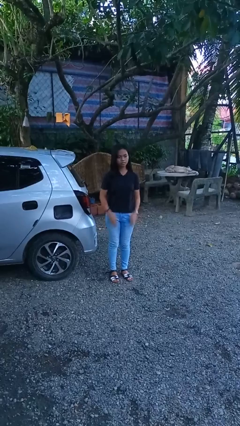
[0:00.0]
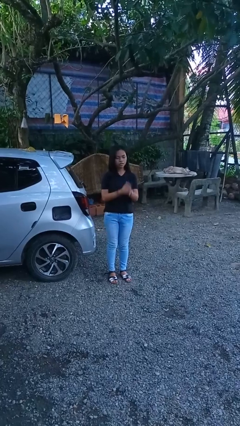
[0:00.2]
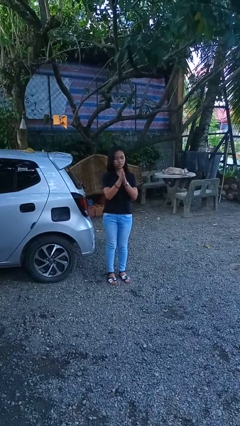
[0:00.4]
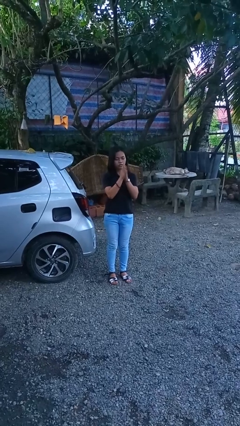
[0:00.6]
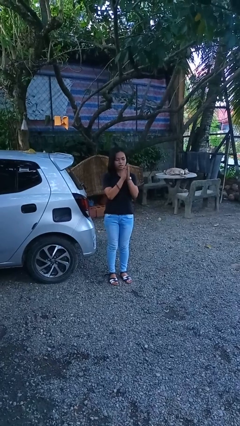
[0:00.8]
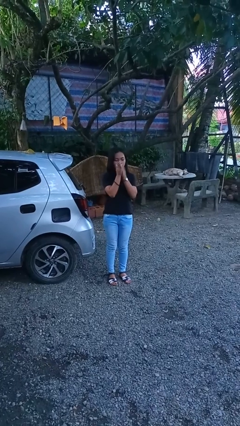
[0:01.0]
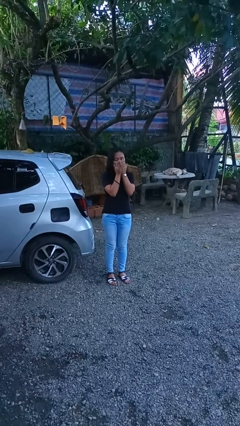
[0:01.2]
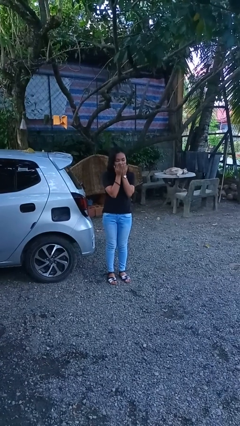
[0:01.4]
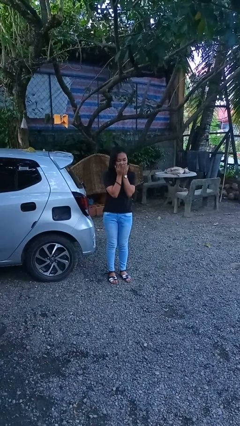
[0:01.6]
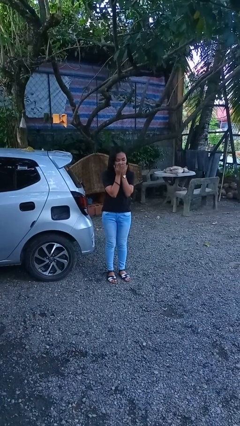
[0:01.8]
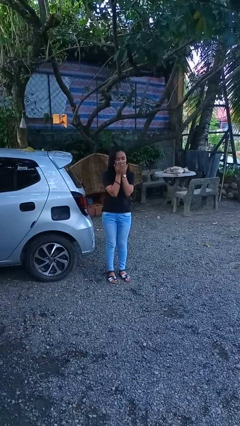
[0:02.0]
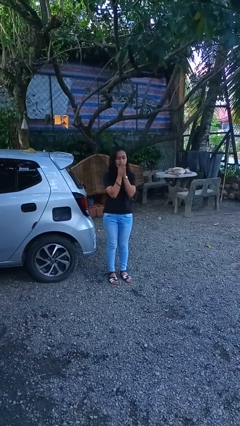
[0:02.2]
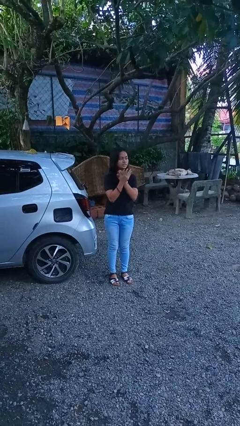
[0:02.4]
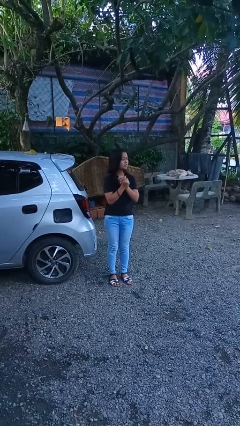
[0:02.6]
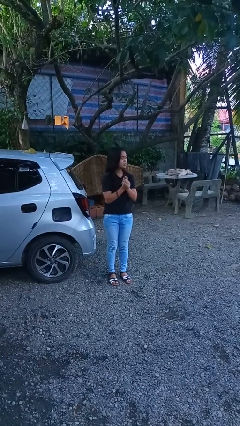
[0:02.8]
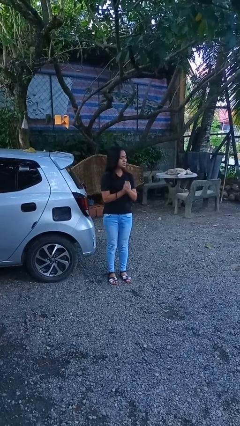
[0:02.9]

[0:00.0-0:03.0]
person blows into hands

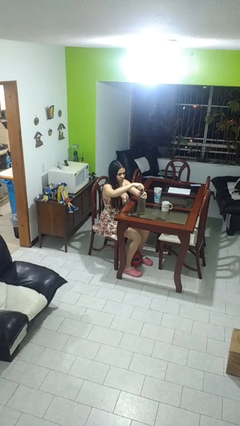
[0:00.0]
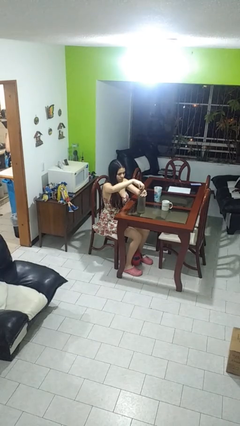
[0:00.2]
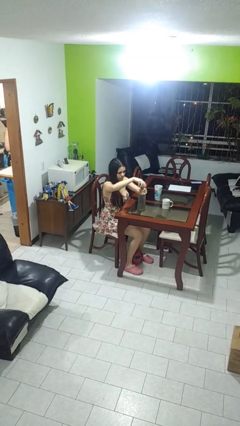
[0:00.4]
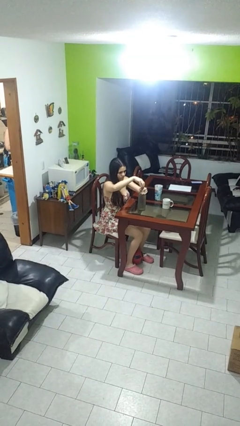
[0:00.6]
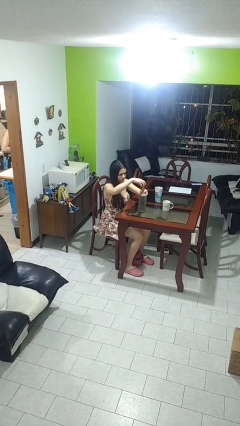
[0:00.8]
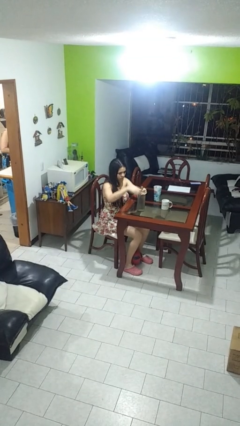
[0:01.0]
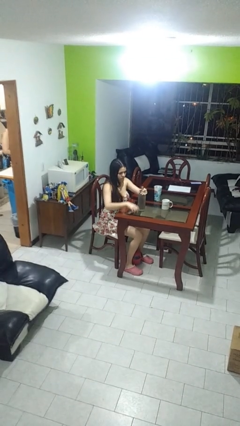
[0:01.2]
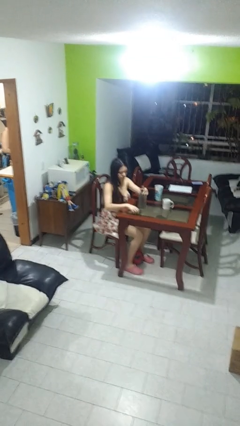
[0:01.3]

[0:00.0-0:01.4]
person unscrews lid from bottle

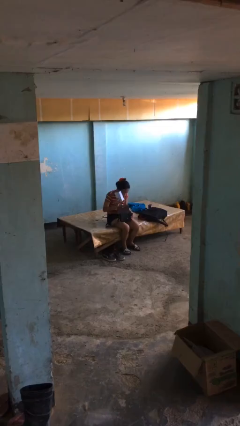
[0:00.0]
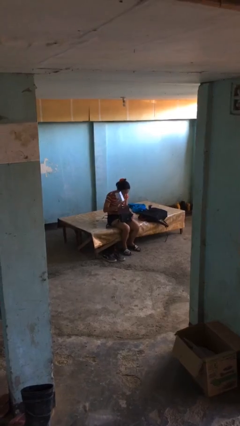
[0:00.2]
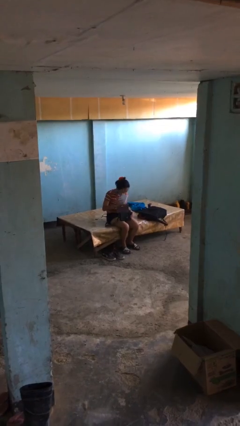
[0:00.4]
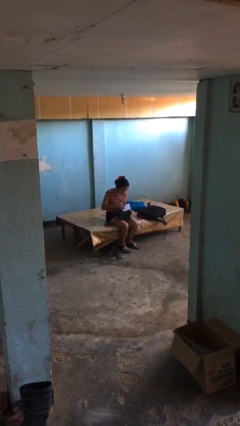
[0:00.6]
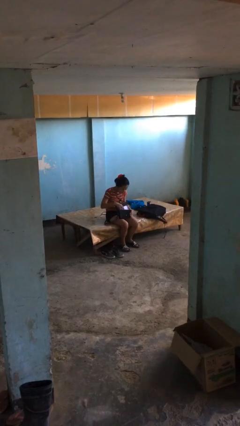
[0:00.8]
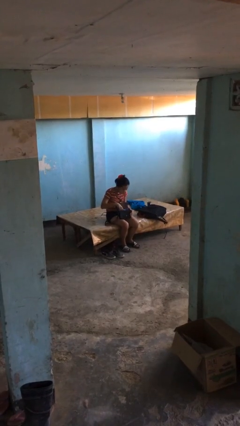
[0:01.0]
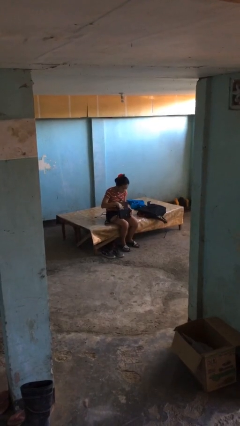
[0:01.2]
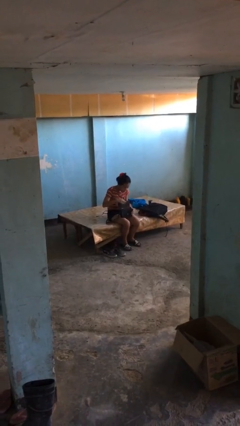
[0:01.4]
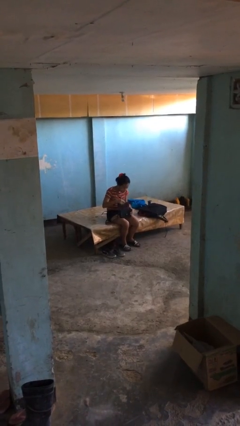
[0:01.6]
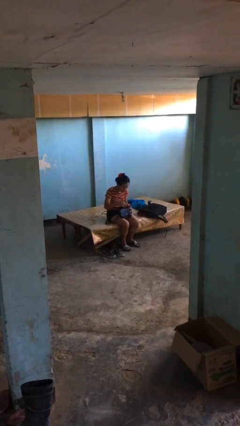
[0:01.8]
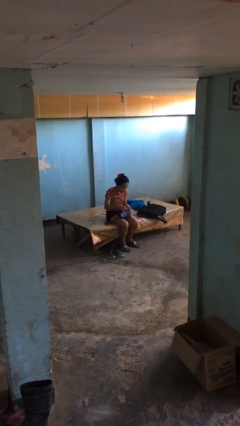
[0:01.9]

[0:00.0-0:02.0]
person puts object into purse

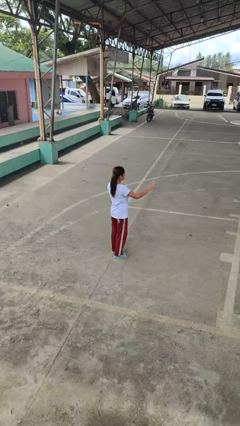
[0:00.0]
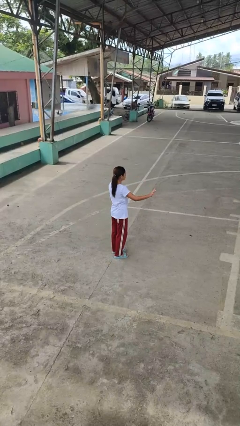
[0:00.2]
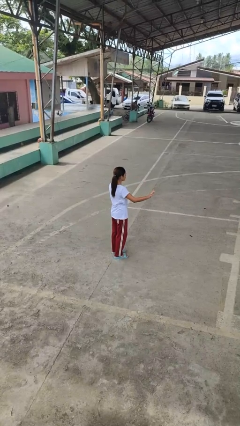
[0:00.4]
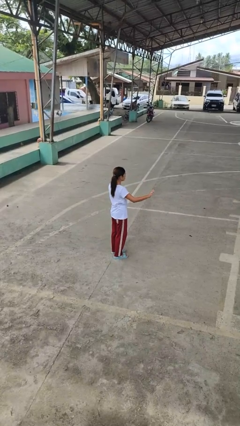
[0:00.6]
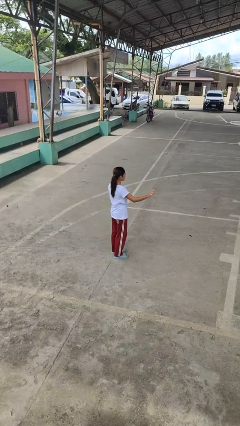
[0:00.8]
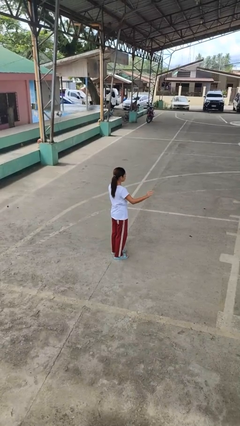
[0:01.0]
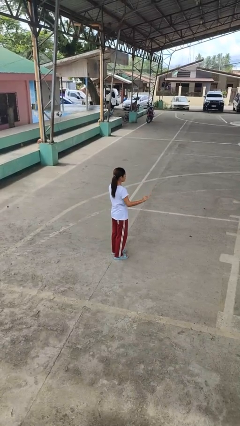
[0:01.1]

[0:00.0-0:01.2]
person gestures swipe right

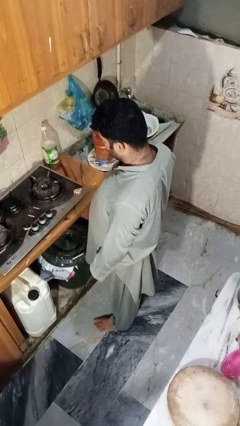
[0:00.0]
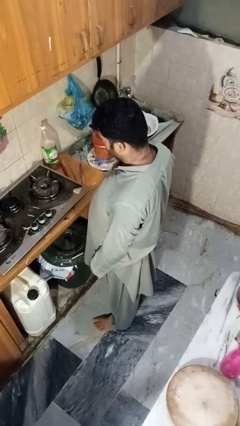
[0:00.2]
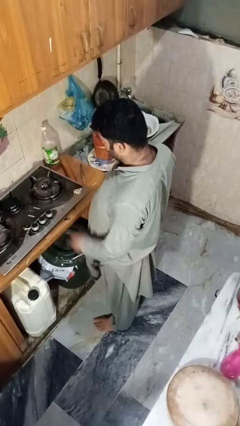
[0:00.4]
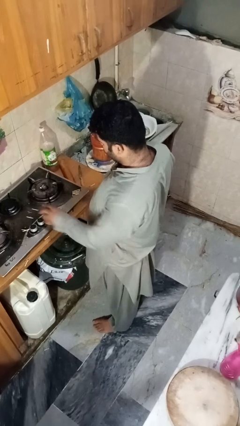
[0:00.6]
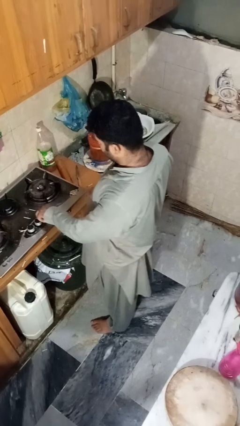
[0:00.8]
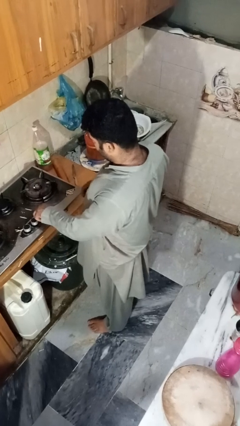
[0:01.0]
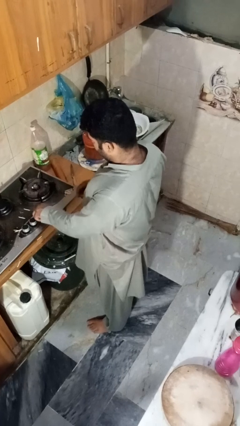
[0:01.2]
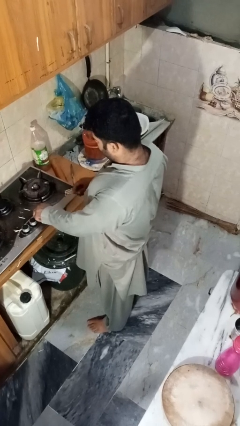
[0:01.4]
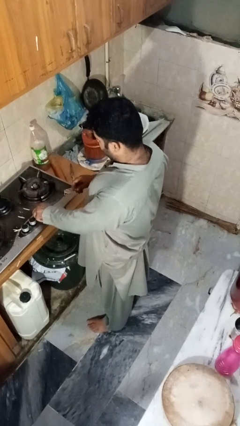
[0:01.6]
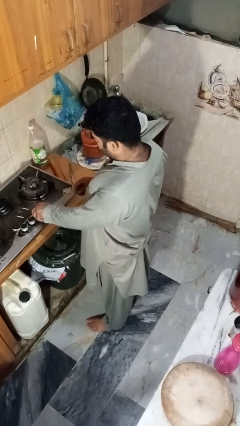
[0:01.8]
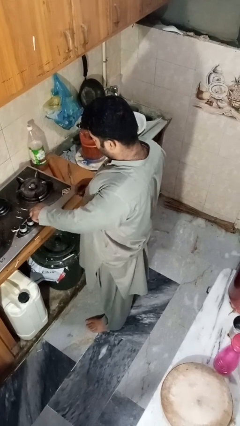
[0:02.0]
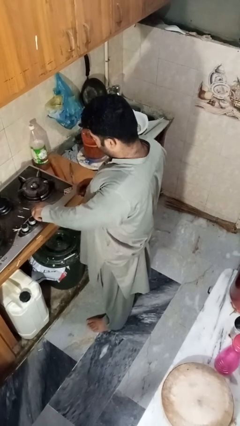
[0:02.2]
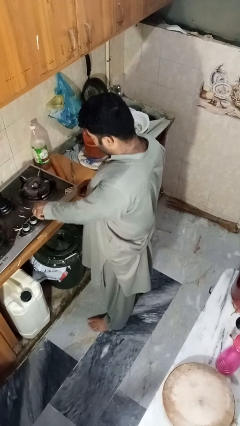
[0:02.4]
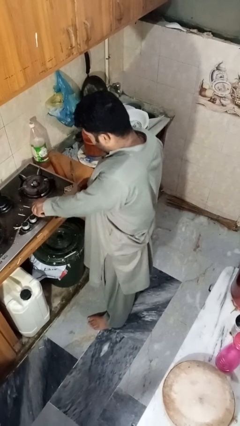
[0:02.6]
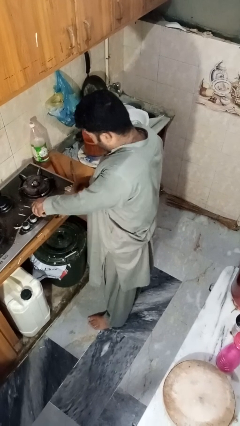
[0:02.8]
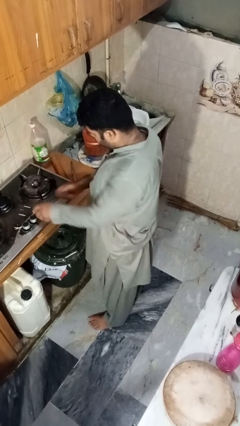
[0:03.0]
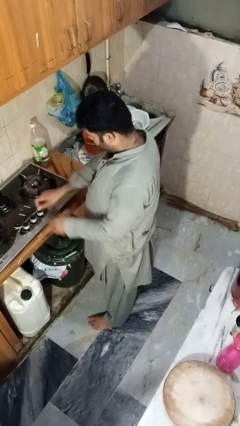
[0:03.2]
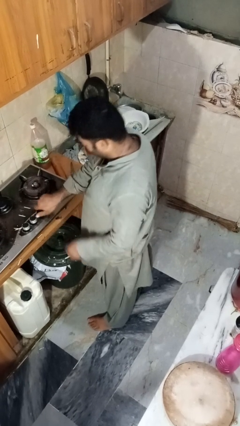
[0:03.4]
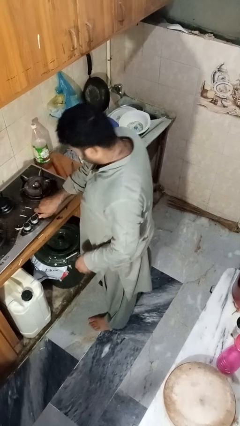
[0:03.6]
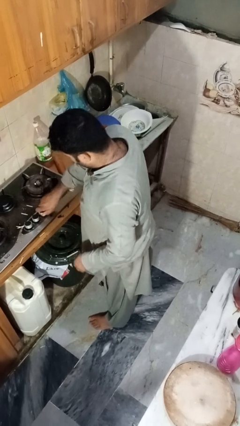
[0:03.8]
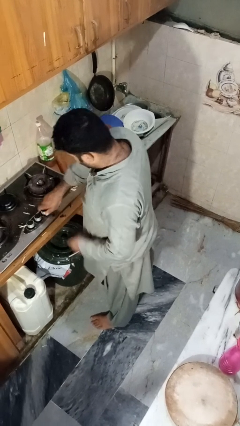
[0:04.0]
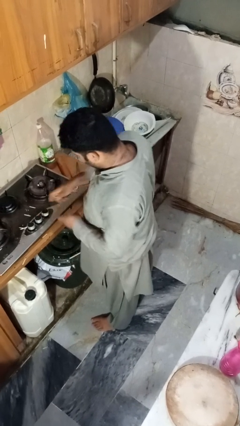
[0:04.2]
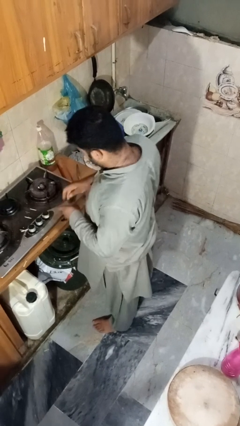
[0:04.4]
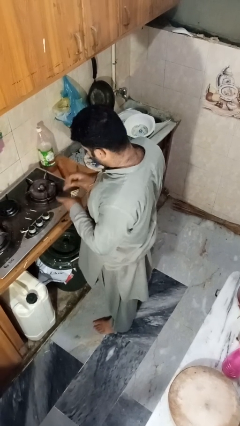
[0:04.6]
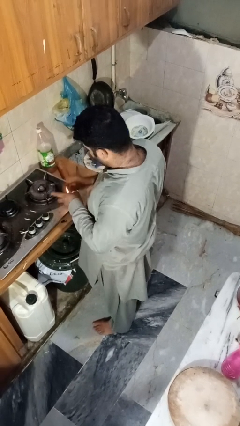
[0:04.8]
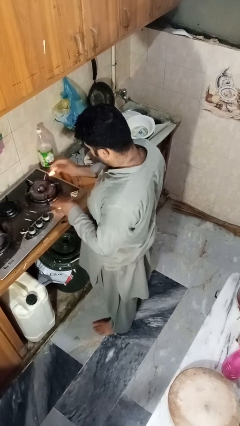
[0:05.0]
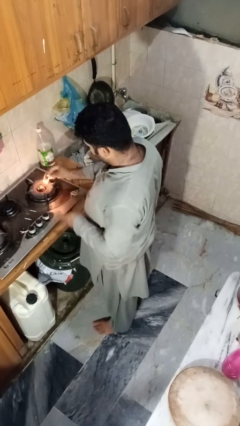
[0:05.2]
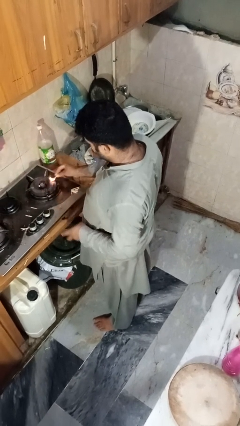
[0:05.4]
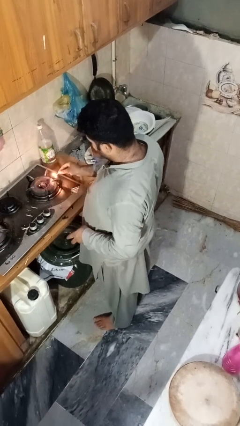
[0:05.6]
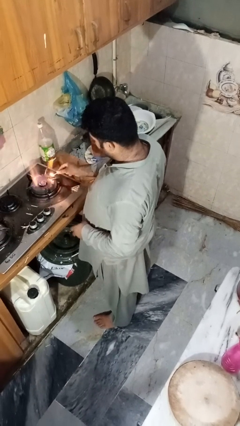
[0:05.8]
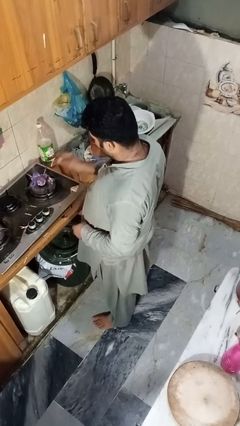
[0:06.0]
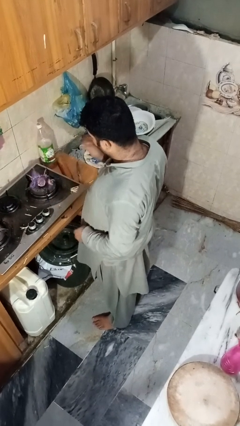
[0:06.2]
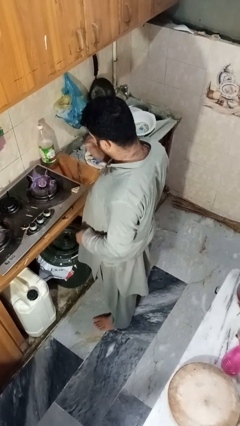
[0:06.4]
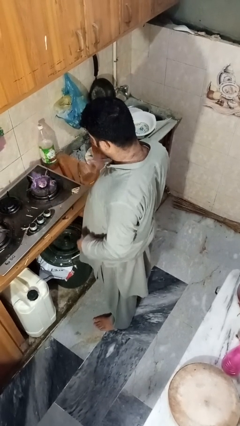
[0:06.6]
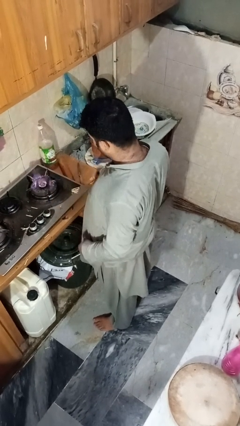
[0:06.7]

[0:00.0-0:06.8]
person turns on stovetop

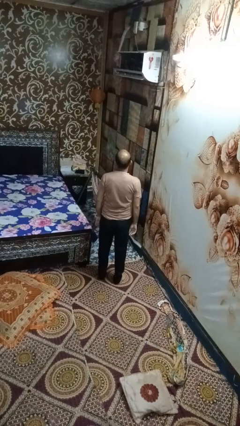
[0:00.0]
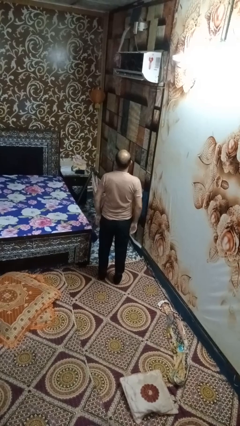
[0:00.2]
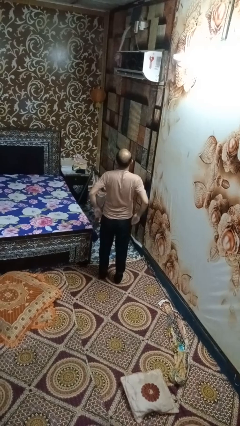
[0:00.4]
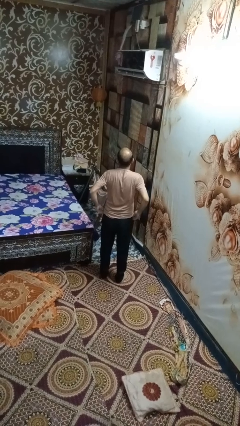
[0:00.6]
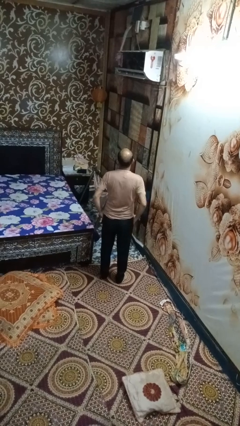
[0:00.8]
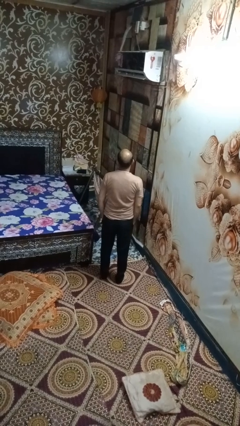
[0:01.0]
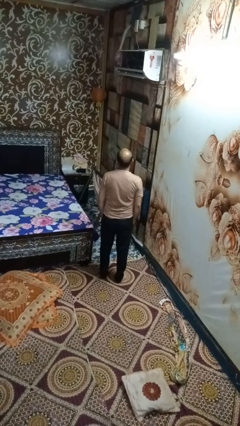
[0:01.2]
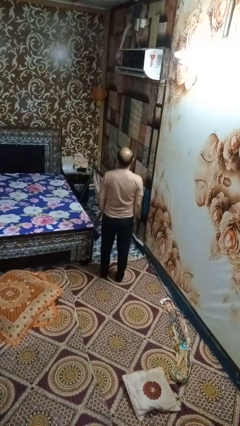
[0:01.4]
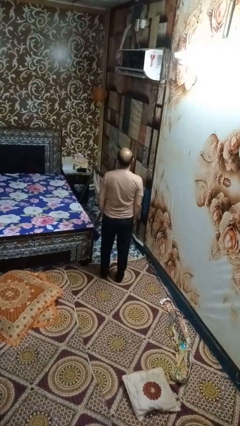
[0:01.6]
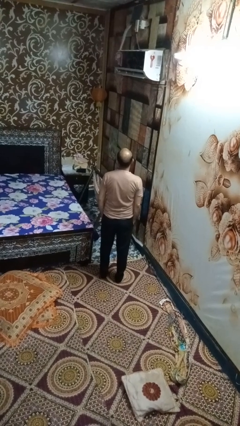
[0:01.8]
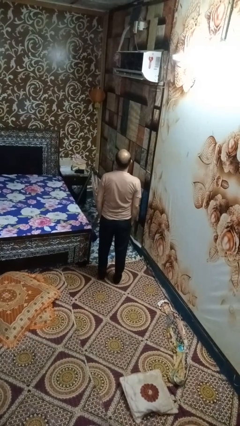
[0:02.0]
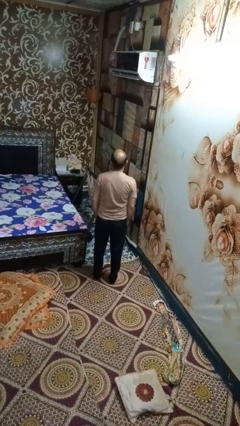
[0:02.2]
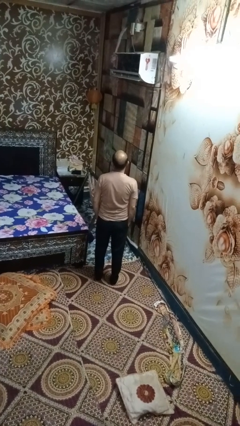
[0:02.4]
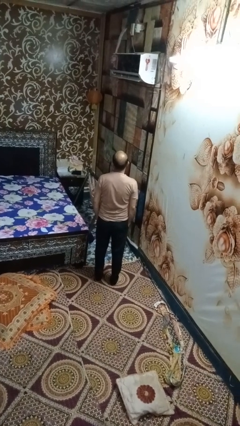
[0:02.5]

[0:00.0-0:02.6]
person puts hands in back pockets

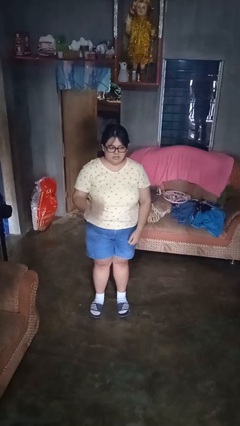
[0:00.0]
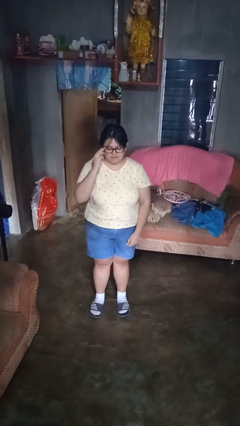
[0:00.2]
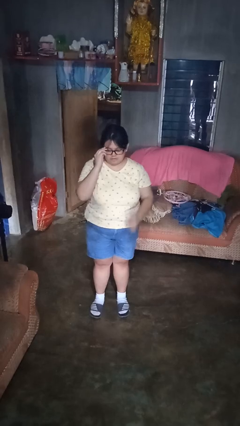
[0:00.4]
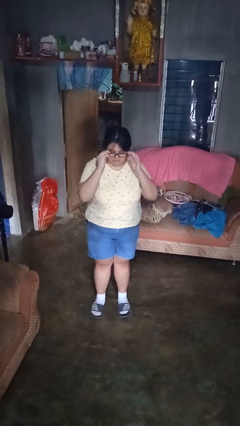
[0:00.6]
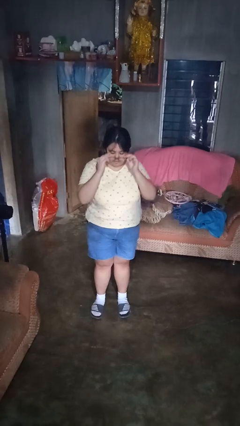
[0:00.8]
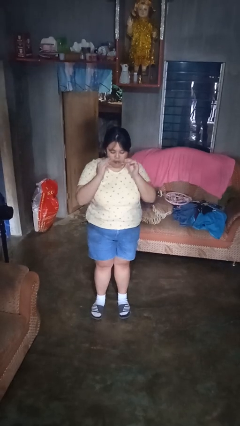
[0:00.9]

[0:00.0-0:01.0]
person takes off glasses
